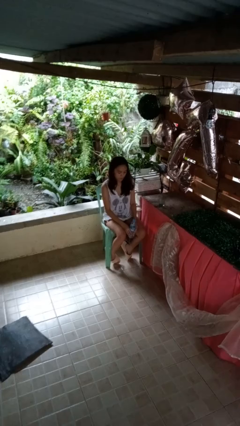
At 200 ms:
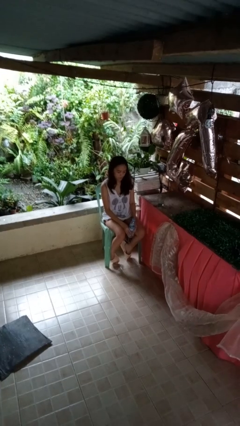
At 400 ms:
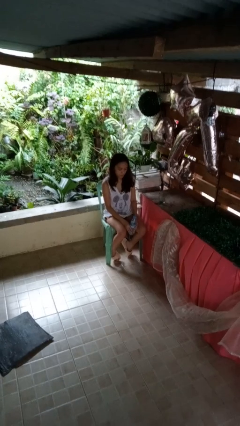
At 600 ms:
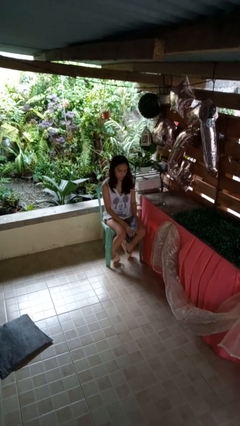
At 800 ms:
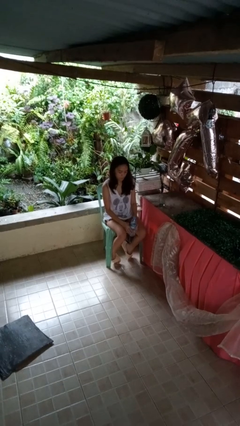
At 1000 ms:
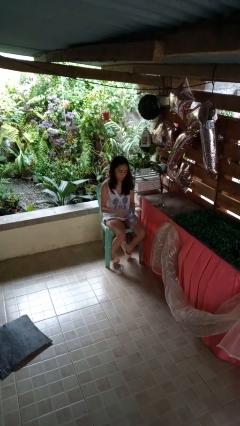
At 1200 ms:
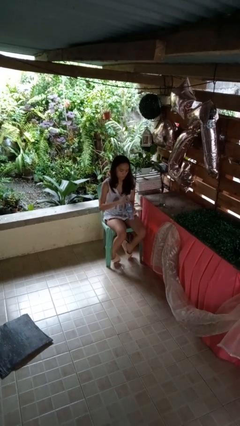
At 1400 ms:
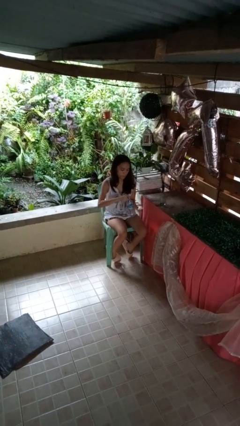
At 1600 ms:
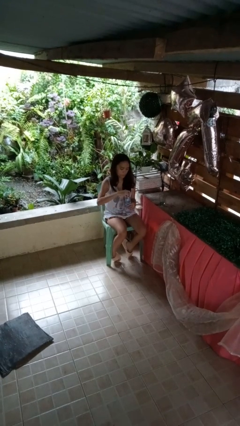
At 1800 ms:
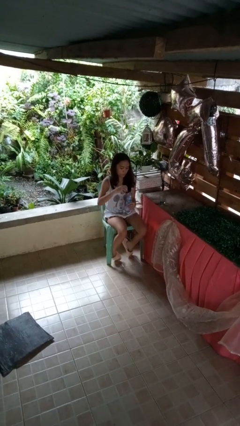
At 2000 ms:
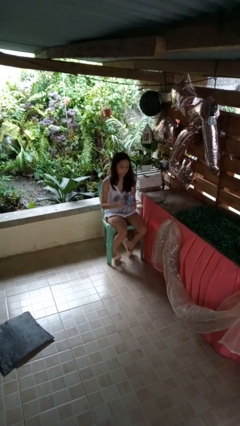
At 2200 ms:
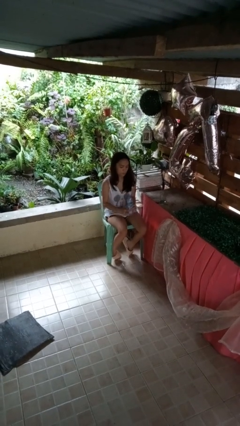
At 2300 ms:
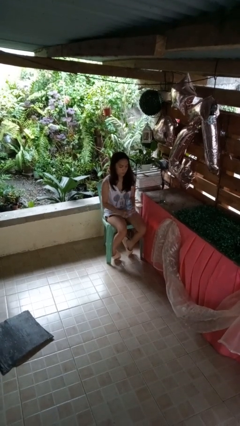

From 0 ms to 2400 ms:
person unscrews lid from bottle

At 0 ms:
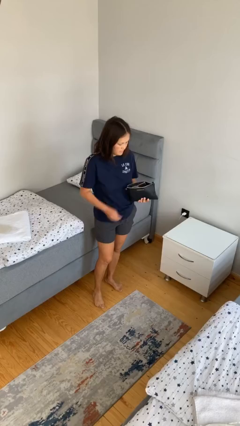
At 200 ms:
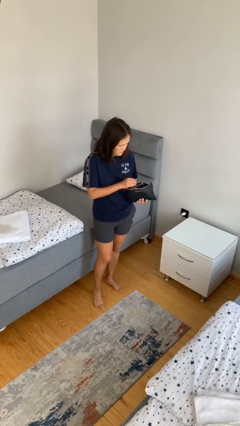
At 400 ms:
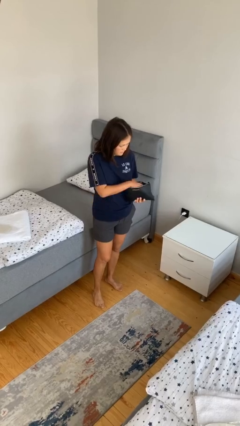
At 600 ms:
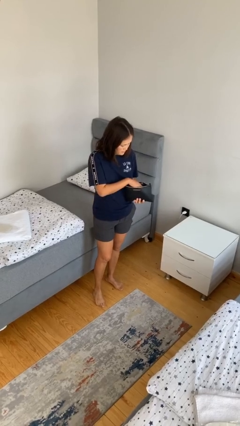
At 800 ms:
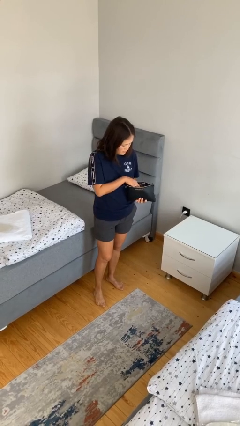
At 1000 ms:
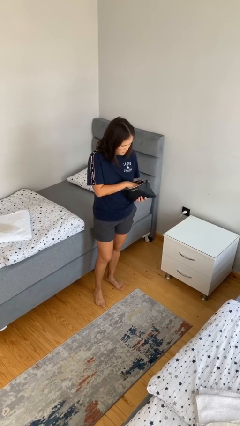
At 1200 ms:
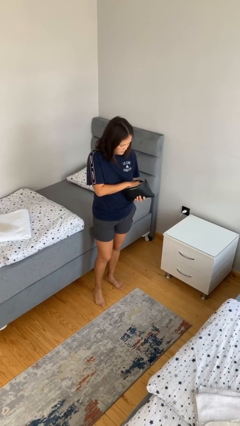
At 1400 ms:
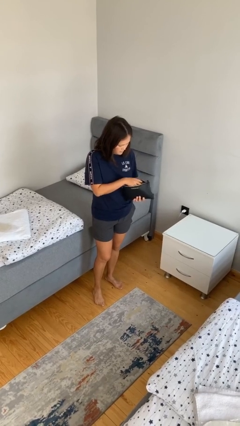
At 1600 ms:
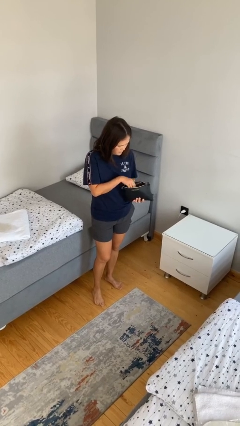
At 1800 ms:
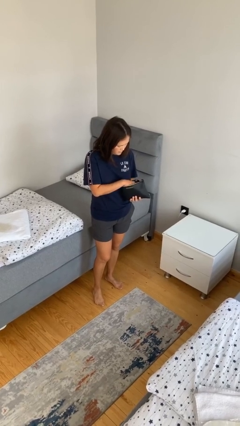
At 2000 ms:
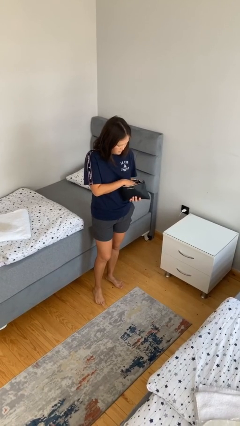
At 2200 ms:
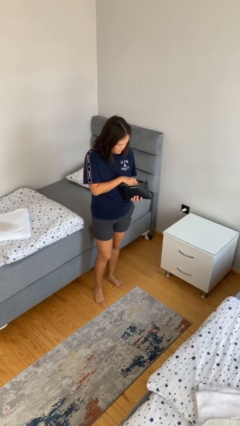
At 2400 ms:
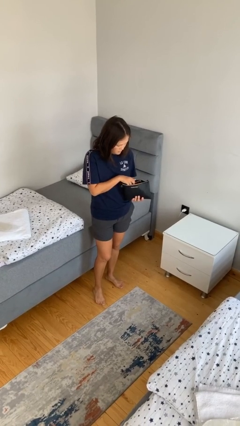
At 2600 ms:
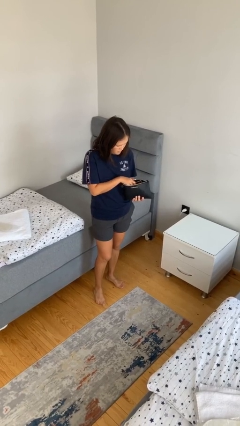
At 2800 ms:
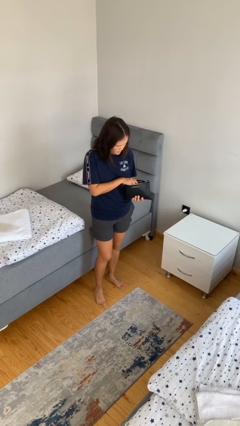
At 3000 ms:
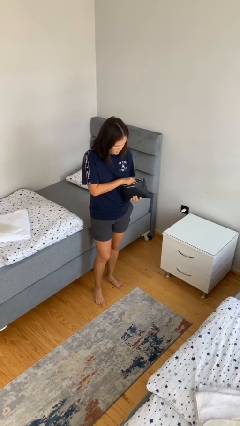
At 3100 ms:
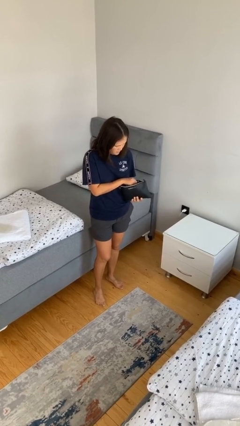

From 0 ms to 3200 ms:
person searches in purse

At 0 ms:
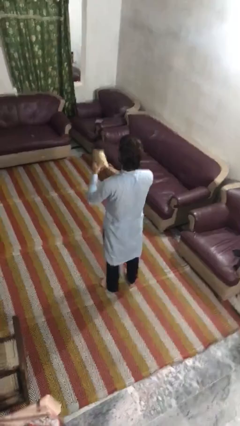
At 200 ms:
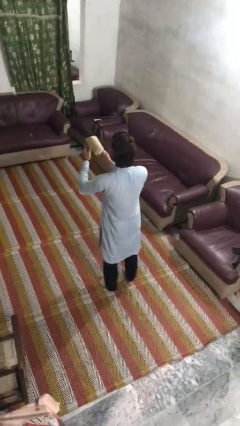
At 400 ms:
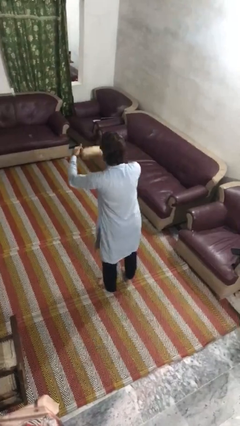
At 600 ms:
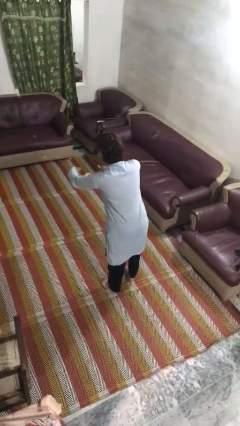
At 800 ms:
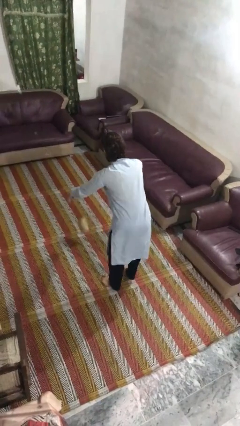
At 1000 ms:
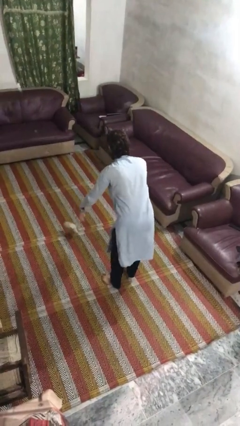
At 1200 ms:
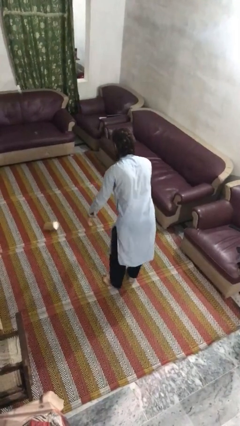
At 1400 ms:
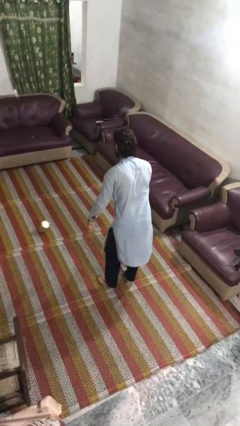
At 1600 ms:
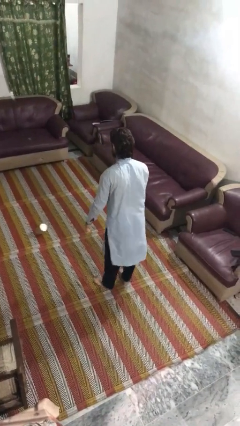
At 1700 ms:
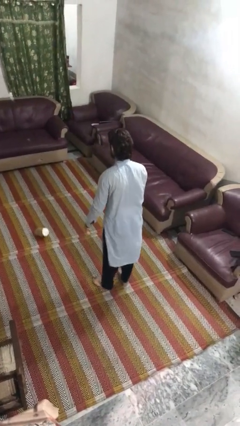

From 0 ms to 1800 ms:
person drops object

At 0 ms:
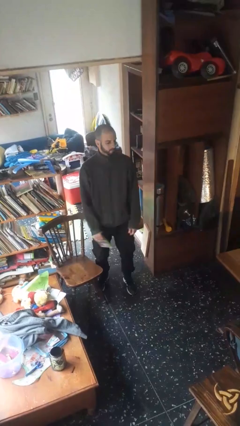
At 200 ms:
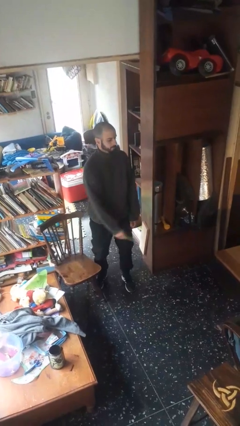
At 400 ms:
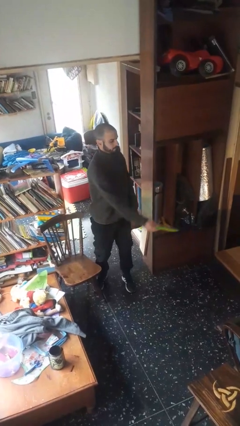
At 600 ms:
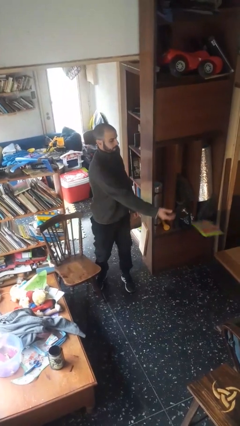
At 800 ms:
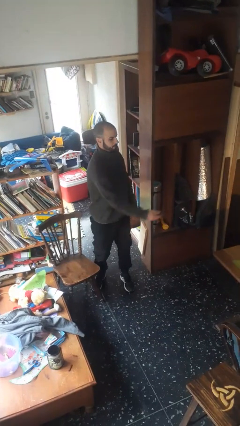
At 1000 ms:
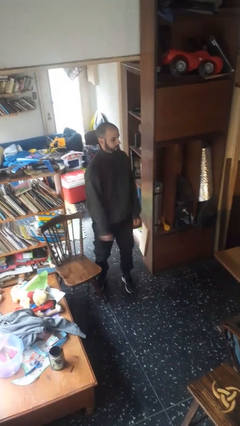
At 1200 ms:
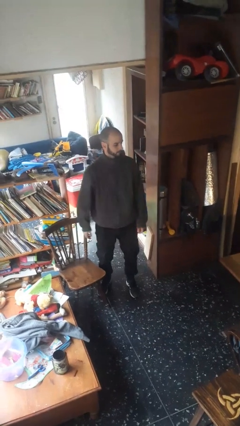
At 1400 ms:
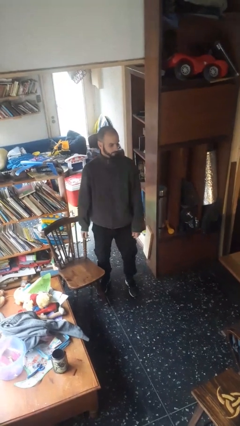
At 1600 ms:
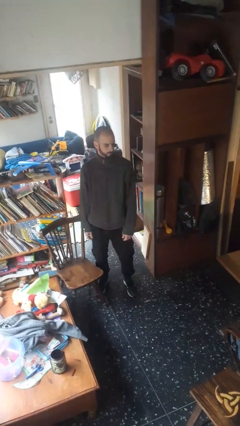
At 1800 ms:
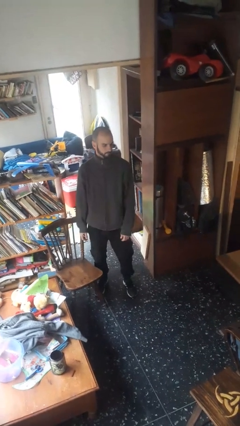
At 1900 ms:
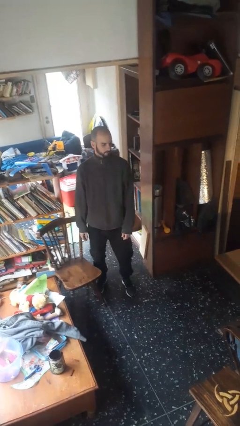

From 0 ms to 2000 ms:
person throws object on table

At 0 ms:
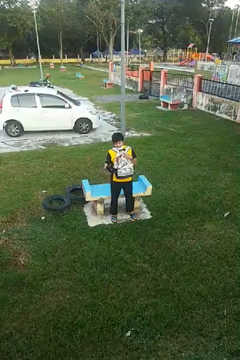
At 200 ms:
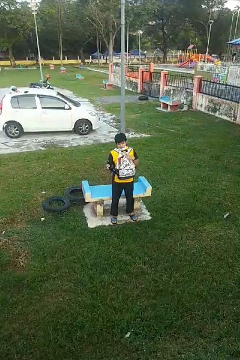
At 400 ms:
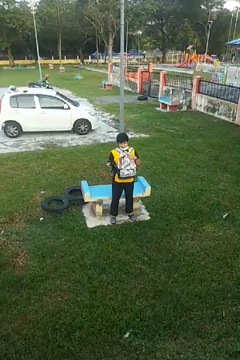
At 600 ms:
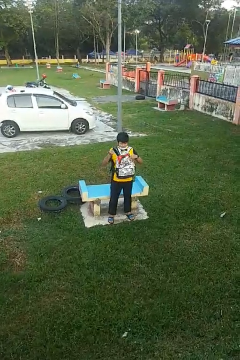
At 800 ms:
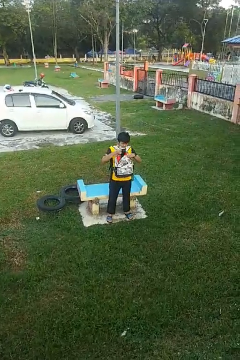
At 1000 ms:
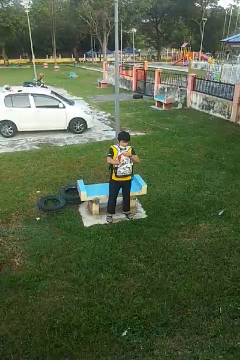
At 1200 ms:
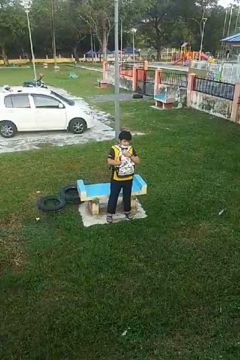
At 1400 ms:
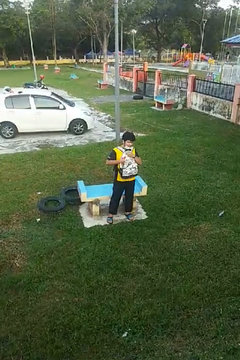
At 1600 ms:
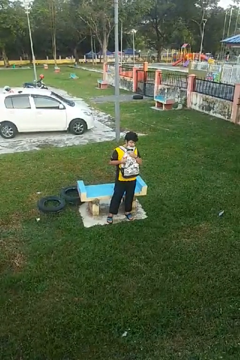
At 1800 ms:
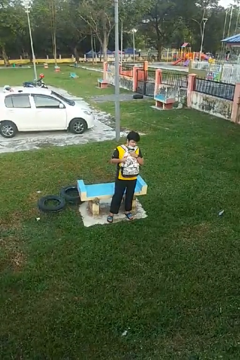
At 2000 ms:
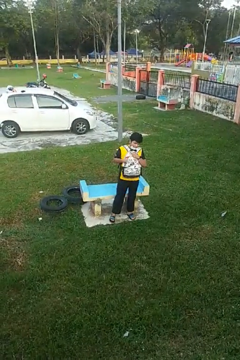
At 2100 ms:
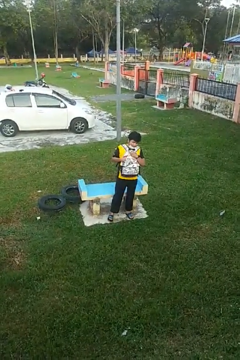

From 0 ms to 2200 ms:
person puts object into backpack

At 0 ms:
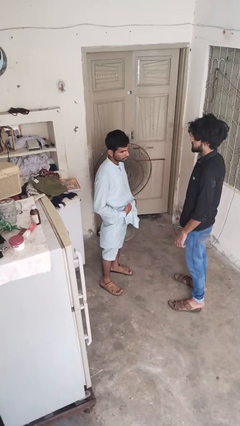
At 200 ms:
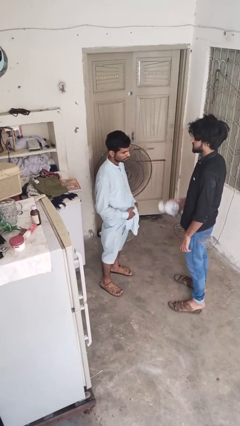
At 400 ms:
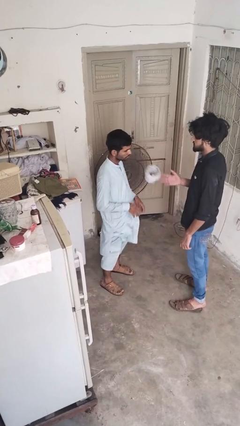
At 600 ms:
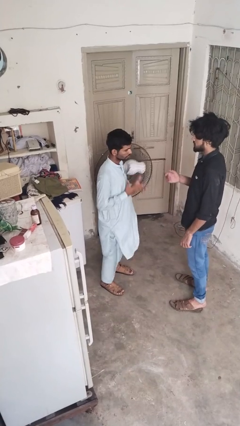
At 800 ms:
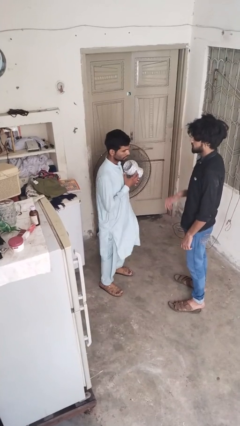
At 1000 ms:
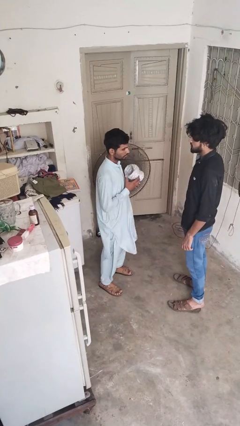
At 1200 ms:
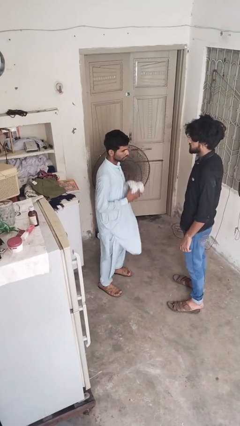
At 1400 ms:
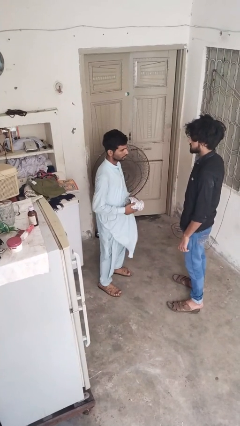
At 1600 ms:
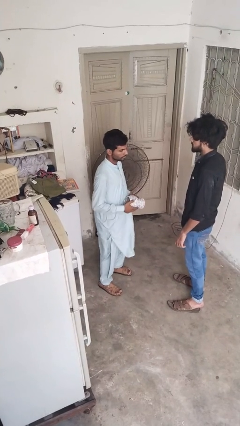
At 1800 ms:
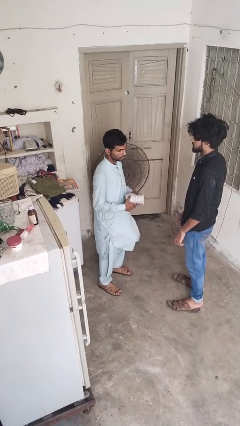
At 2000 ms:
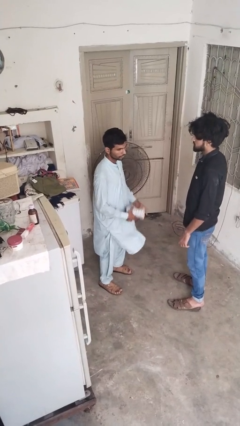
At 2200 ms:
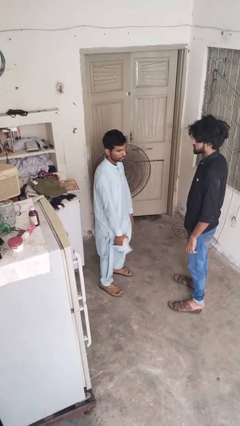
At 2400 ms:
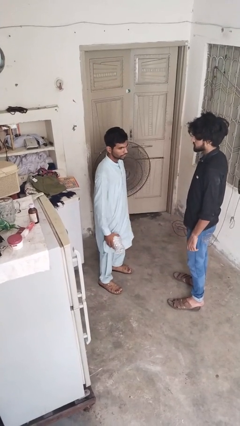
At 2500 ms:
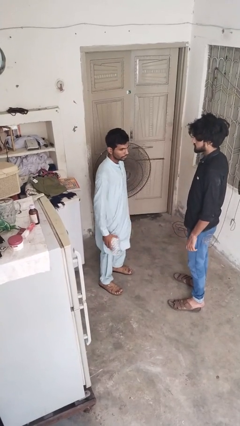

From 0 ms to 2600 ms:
person catches object from person

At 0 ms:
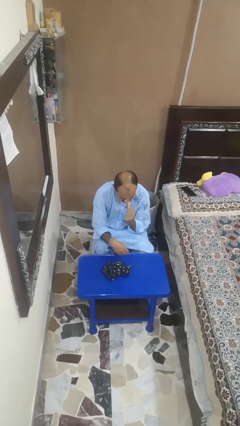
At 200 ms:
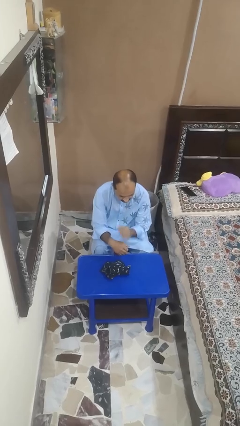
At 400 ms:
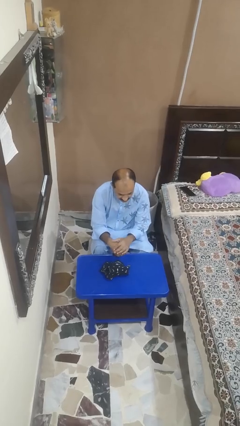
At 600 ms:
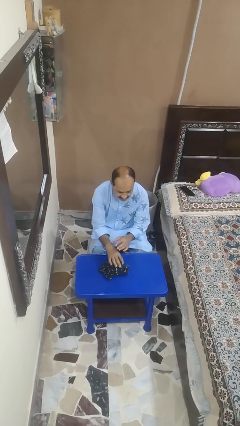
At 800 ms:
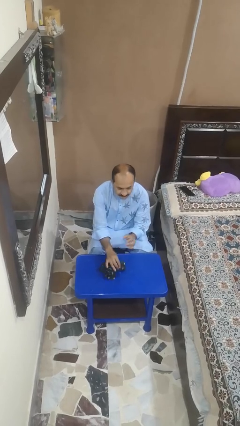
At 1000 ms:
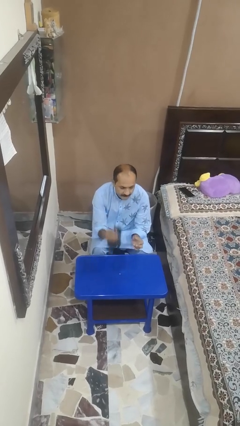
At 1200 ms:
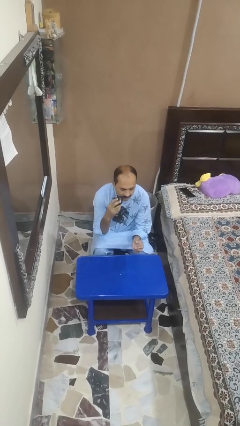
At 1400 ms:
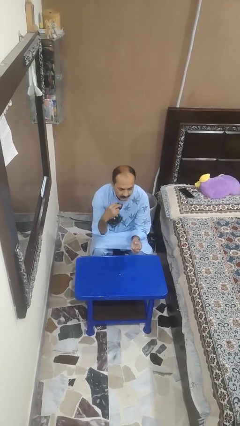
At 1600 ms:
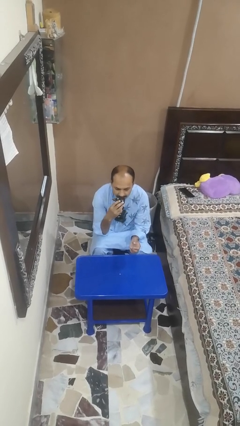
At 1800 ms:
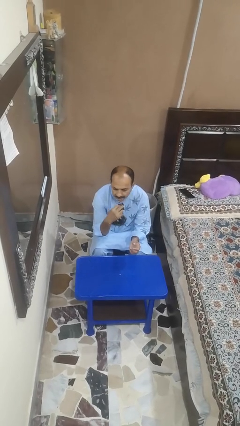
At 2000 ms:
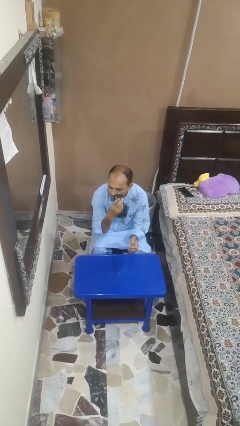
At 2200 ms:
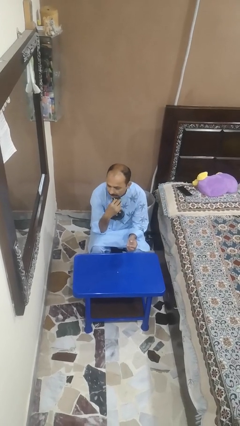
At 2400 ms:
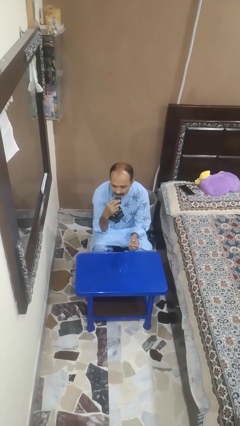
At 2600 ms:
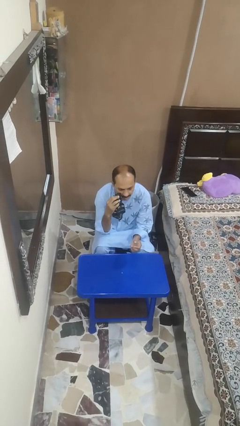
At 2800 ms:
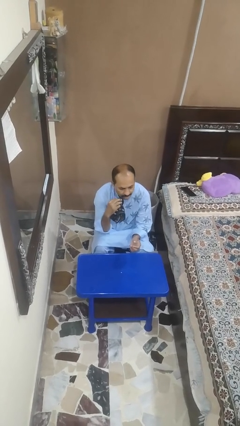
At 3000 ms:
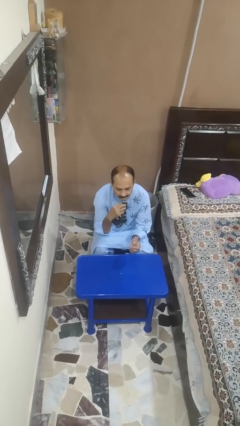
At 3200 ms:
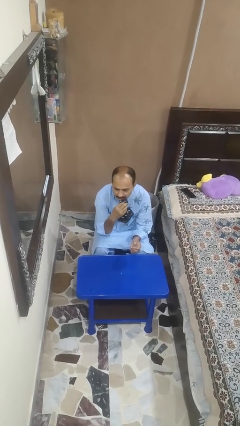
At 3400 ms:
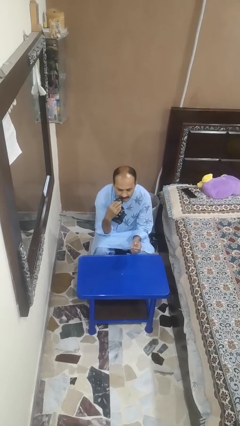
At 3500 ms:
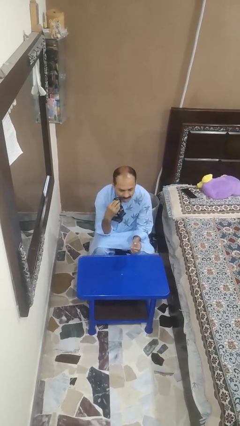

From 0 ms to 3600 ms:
person wipes mouth with napkin
